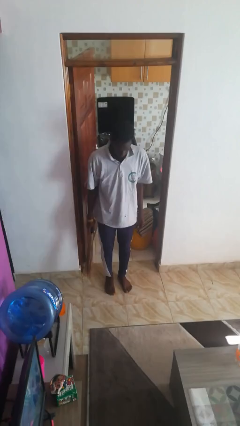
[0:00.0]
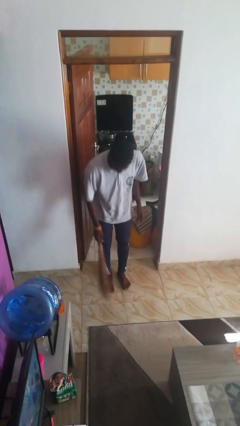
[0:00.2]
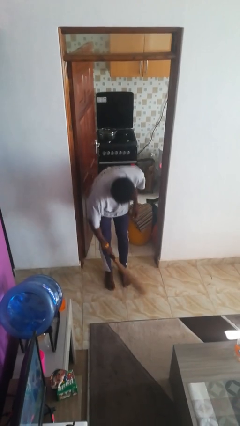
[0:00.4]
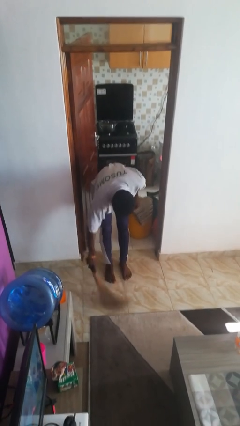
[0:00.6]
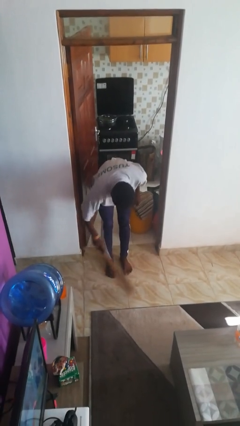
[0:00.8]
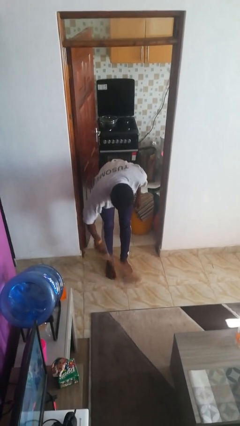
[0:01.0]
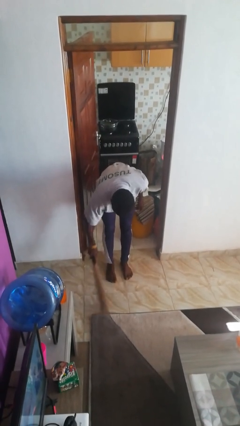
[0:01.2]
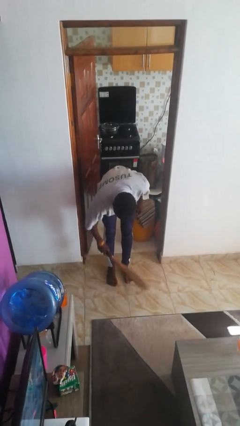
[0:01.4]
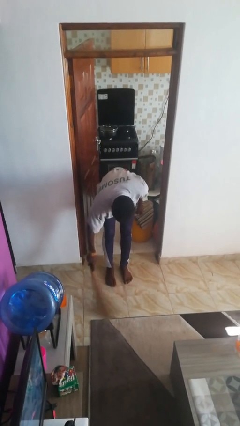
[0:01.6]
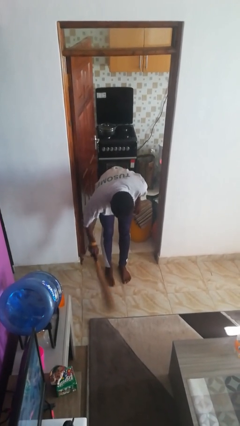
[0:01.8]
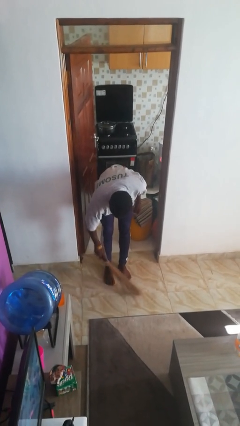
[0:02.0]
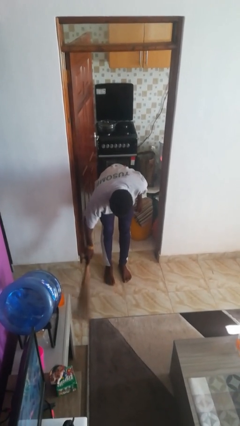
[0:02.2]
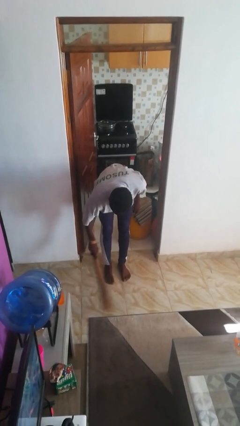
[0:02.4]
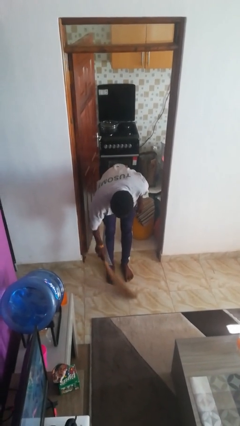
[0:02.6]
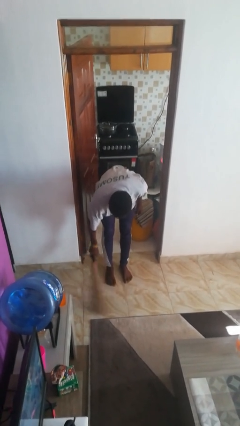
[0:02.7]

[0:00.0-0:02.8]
person sweeps floor

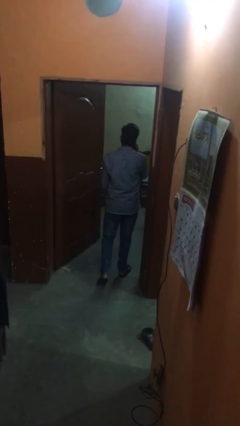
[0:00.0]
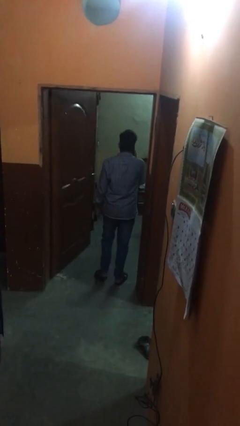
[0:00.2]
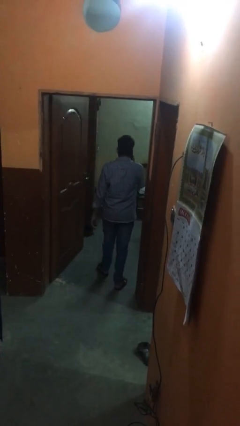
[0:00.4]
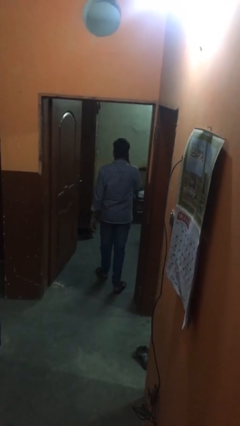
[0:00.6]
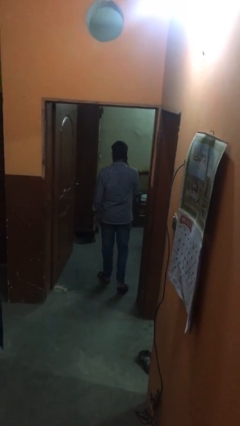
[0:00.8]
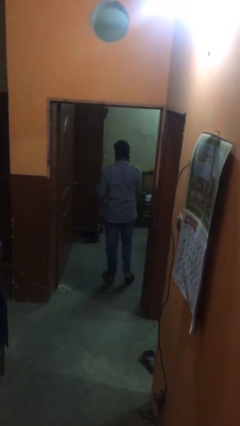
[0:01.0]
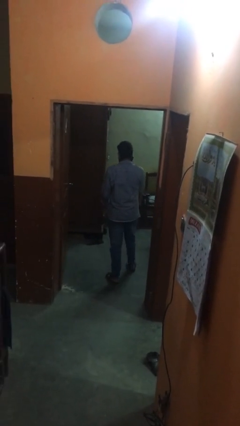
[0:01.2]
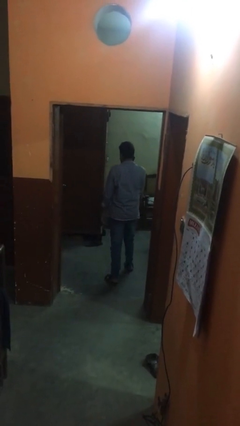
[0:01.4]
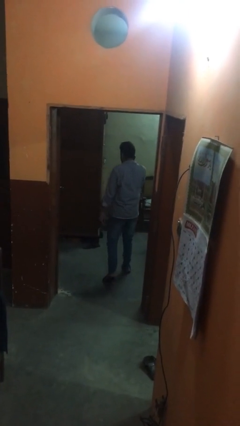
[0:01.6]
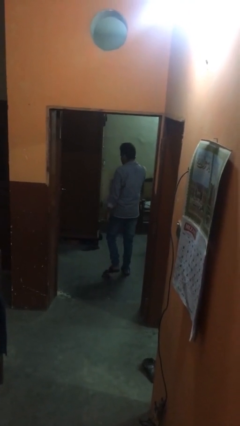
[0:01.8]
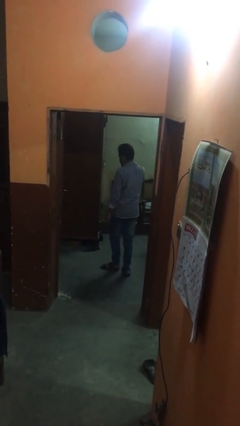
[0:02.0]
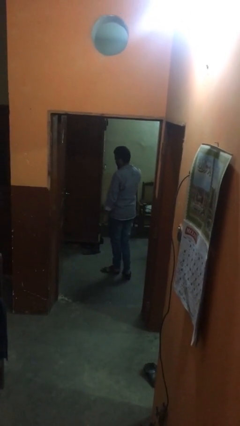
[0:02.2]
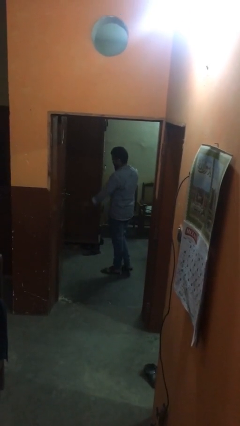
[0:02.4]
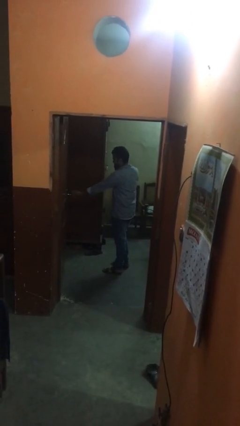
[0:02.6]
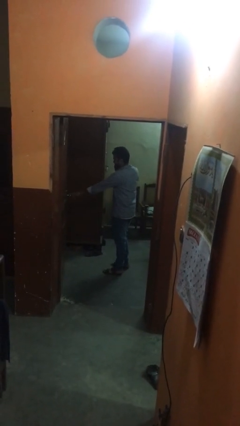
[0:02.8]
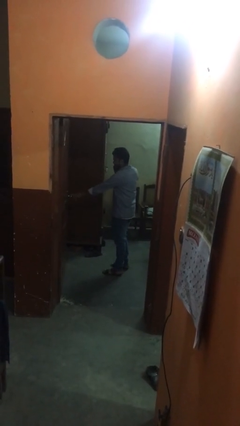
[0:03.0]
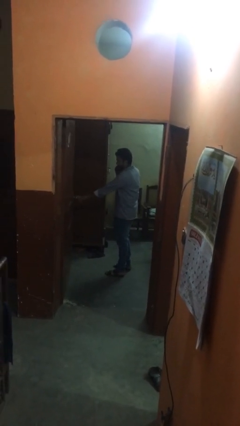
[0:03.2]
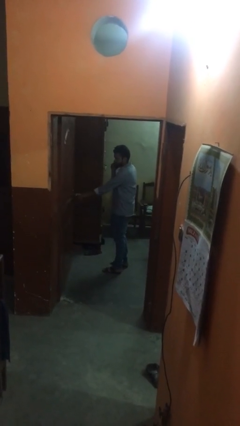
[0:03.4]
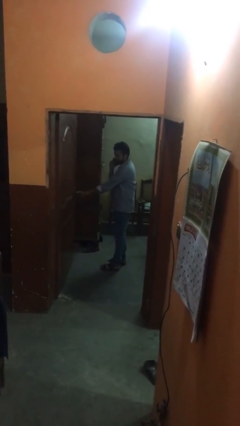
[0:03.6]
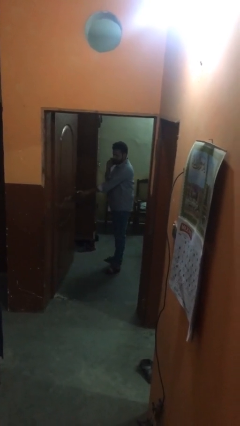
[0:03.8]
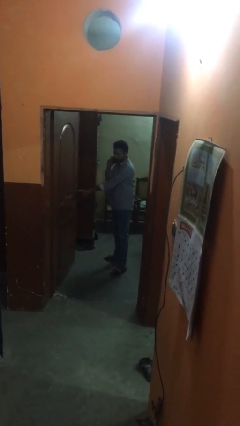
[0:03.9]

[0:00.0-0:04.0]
person exits scene through structure

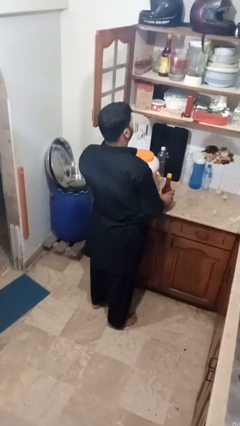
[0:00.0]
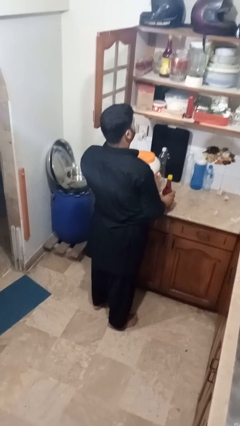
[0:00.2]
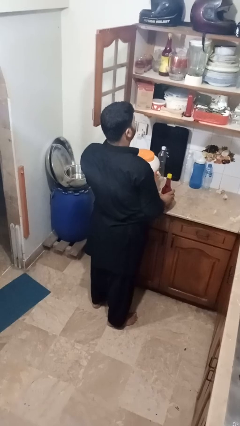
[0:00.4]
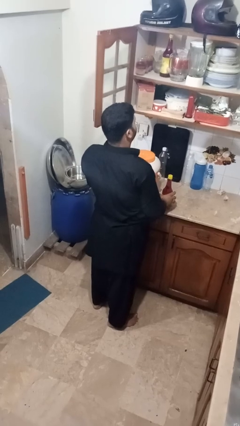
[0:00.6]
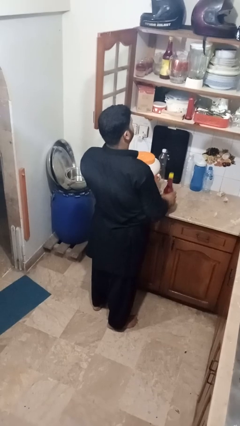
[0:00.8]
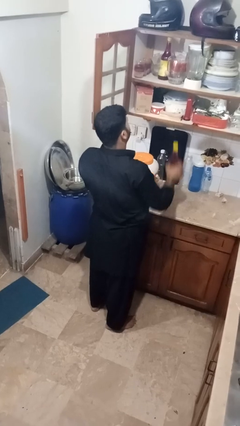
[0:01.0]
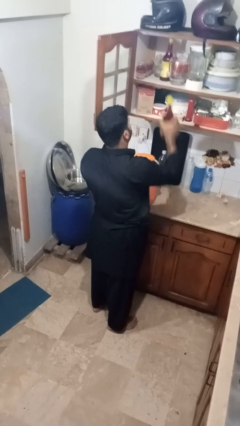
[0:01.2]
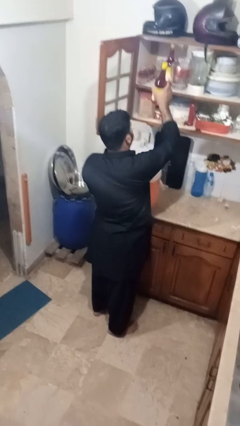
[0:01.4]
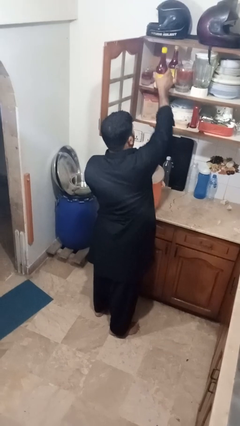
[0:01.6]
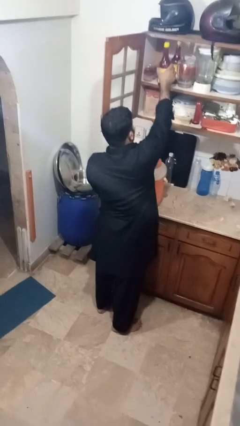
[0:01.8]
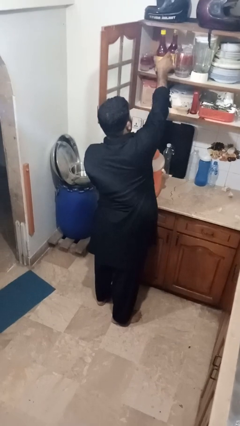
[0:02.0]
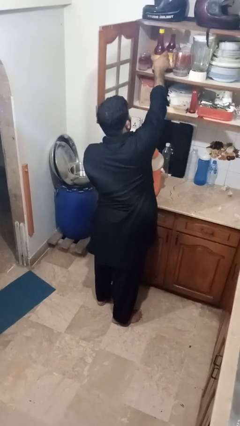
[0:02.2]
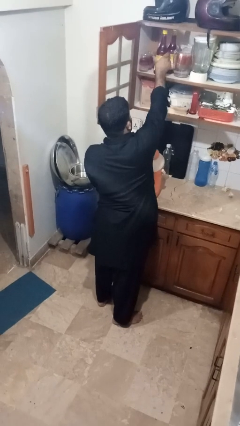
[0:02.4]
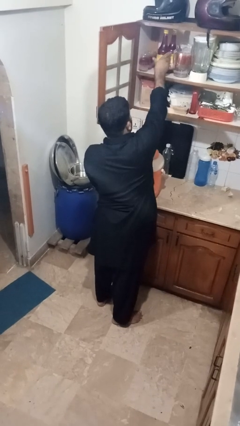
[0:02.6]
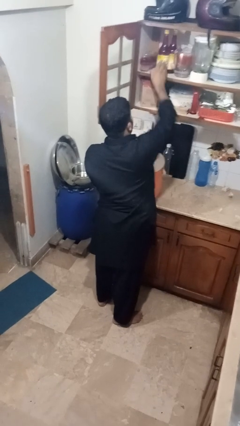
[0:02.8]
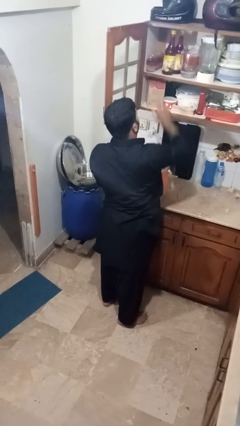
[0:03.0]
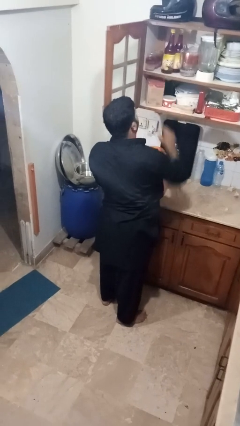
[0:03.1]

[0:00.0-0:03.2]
person puts down object into cabinet

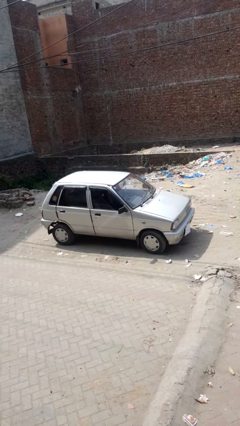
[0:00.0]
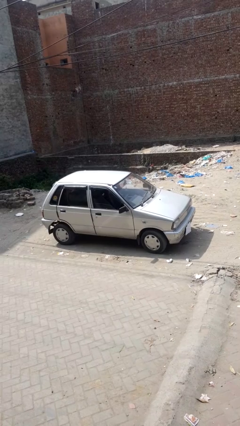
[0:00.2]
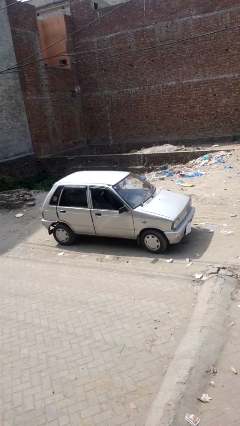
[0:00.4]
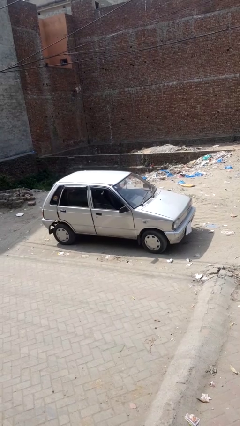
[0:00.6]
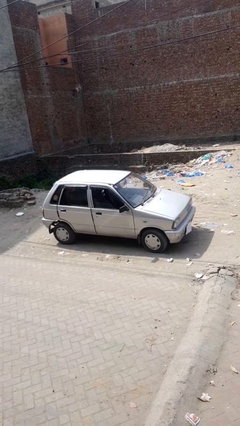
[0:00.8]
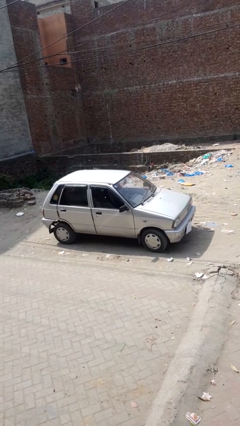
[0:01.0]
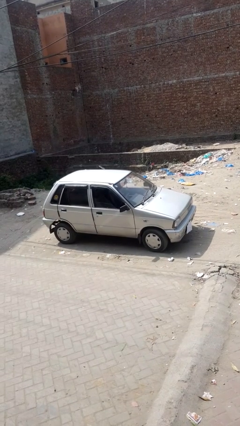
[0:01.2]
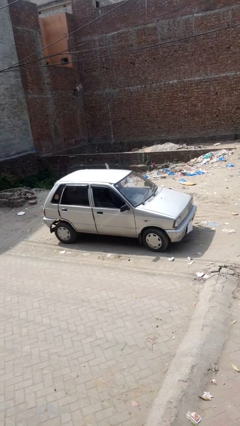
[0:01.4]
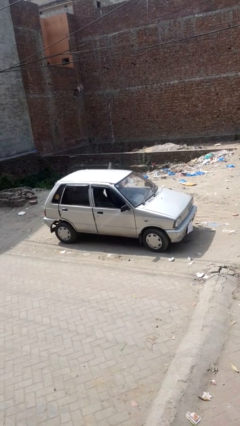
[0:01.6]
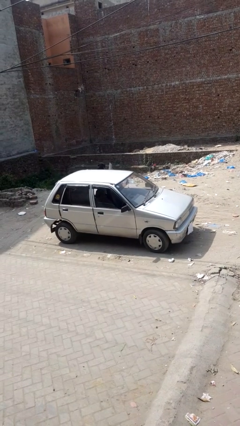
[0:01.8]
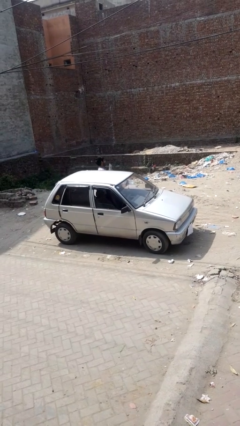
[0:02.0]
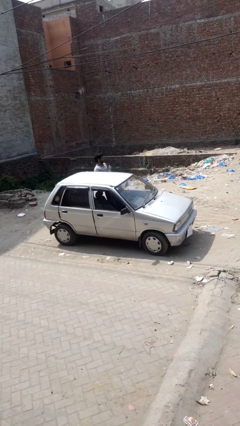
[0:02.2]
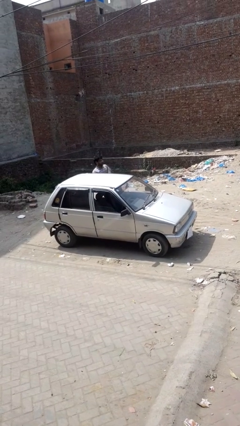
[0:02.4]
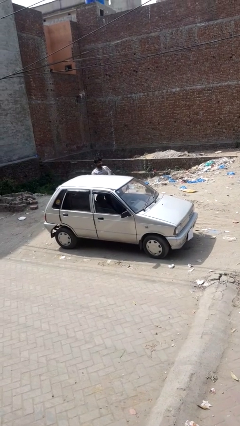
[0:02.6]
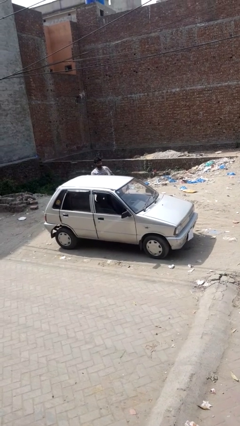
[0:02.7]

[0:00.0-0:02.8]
car drops off person

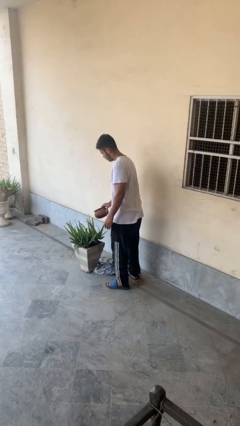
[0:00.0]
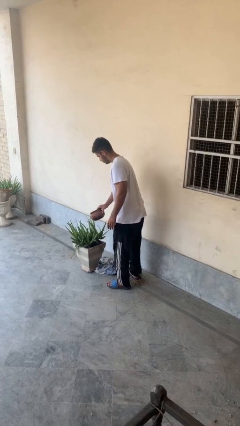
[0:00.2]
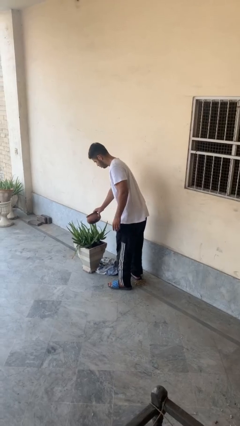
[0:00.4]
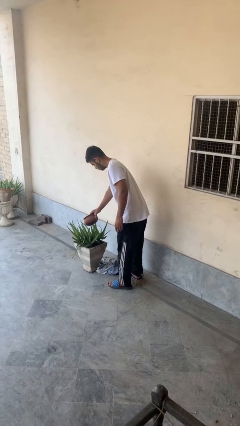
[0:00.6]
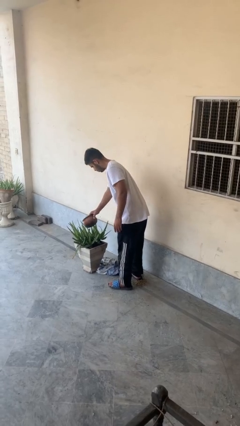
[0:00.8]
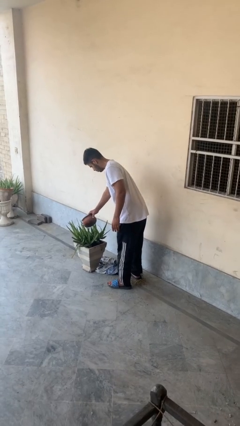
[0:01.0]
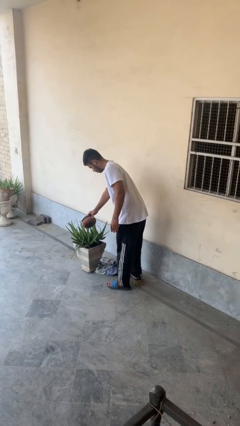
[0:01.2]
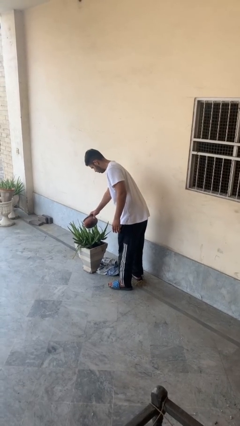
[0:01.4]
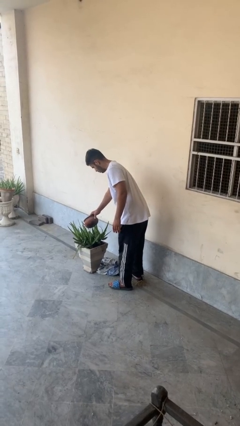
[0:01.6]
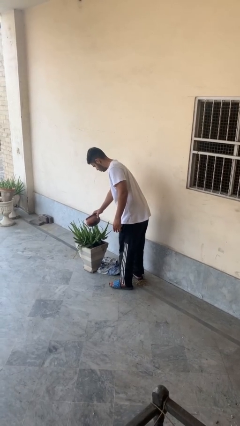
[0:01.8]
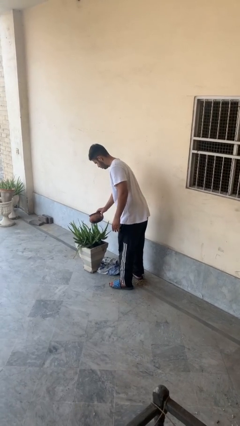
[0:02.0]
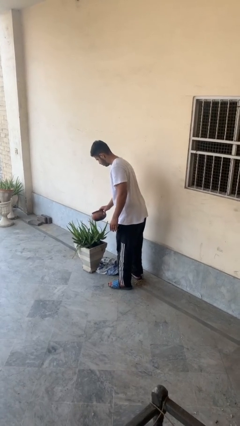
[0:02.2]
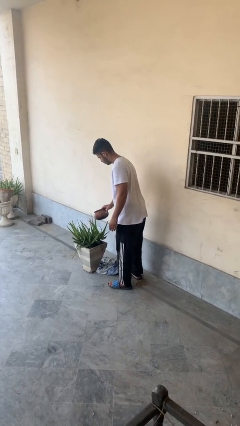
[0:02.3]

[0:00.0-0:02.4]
person waters houseplant

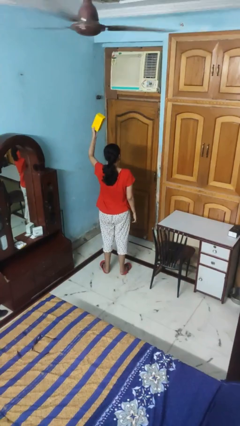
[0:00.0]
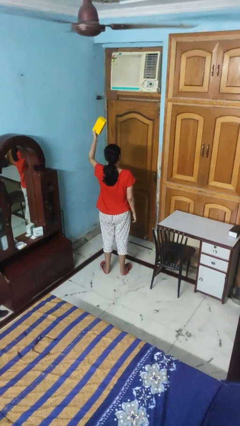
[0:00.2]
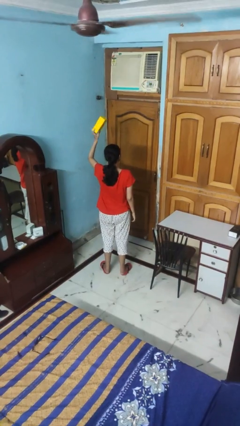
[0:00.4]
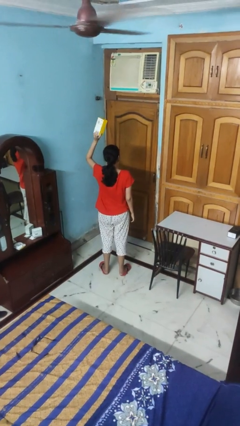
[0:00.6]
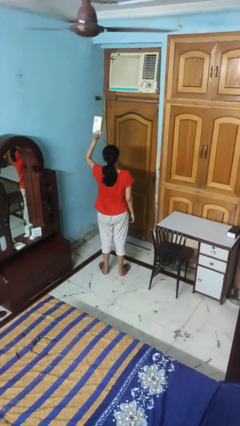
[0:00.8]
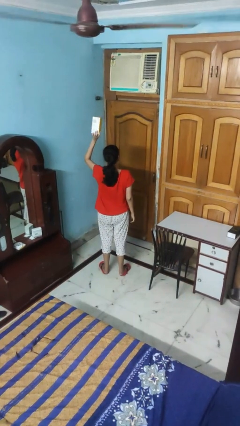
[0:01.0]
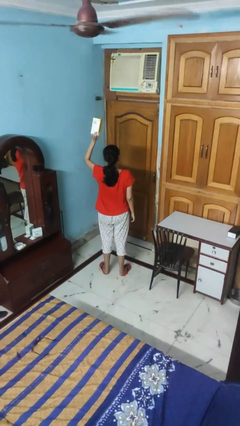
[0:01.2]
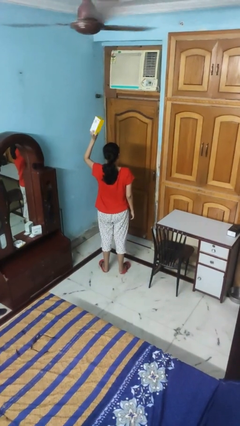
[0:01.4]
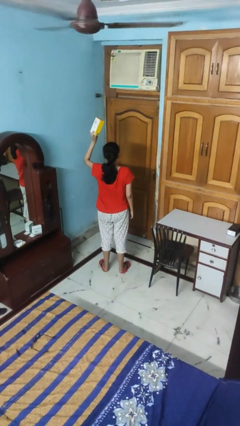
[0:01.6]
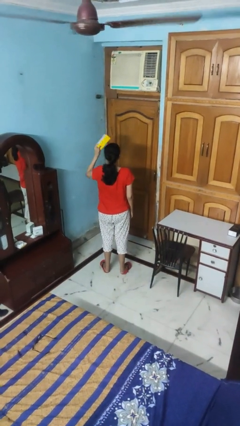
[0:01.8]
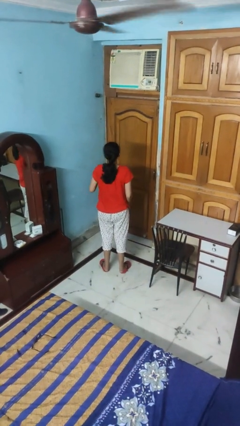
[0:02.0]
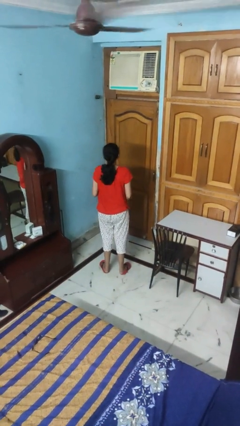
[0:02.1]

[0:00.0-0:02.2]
person holds object above head
